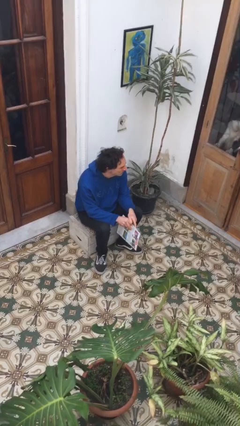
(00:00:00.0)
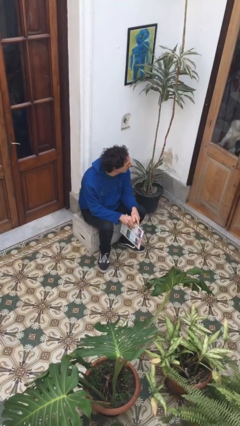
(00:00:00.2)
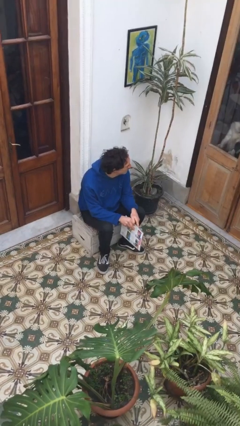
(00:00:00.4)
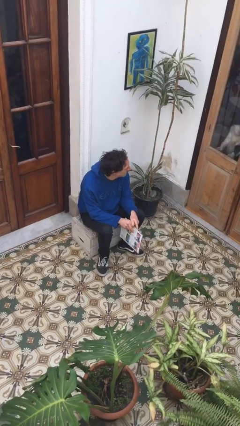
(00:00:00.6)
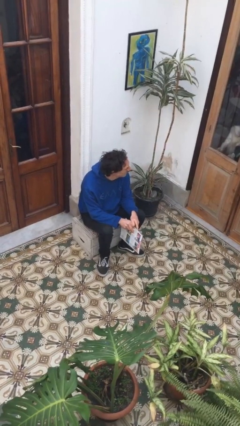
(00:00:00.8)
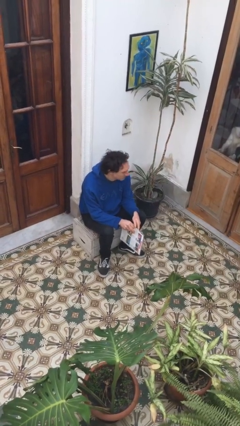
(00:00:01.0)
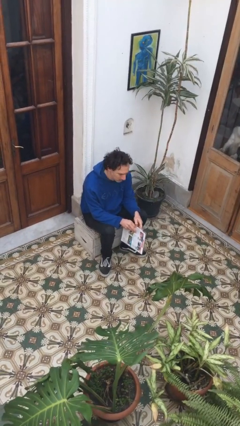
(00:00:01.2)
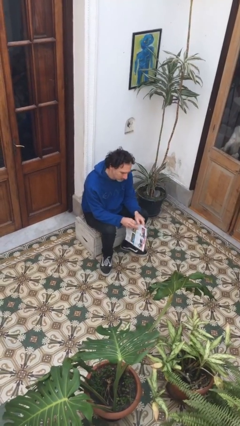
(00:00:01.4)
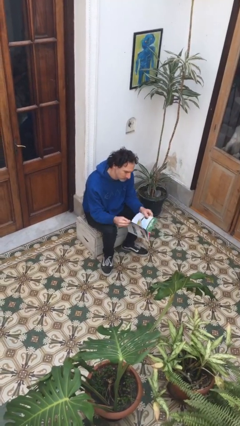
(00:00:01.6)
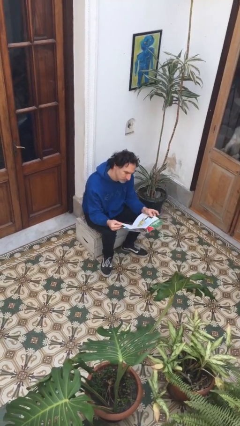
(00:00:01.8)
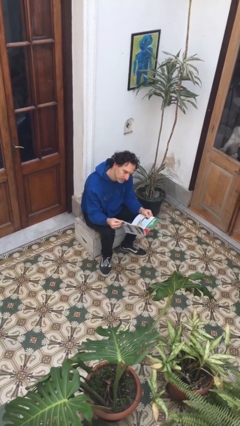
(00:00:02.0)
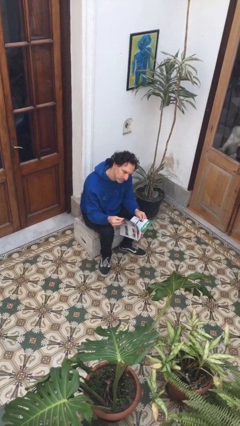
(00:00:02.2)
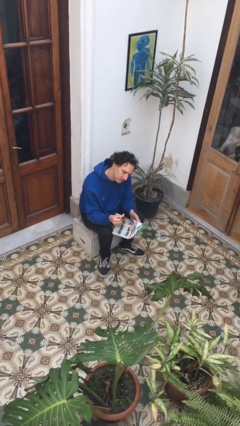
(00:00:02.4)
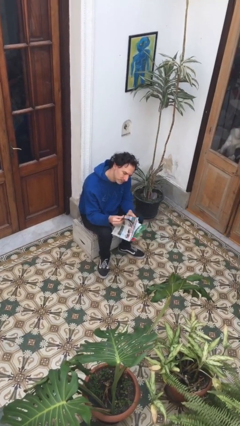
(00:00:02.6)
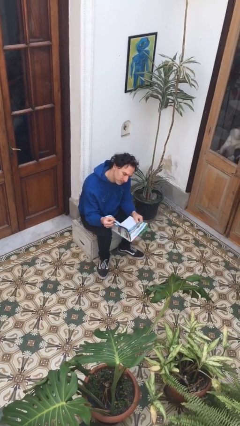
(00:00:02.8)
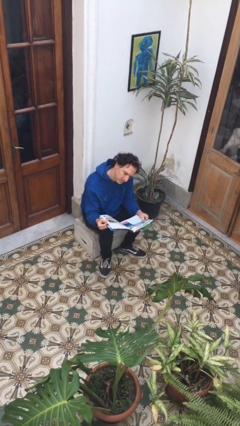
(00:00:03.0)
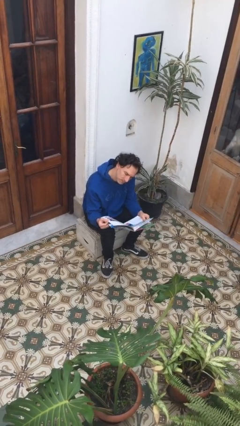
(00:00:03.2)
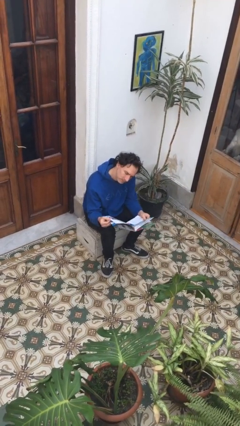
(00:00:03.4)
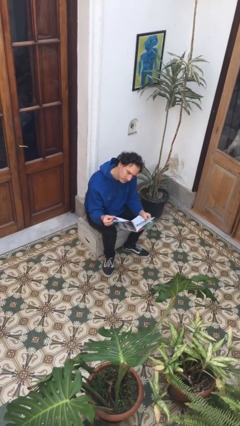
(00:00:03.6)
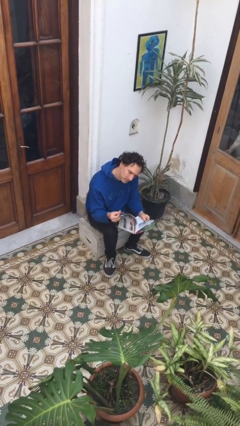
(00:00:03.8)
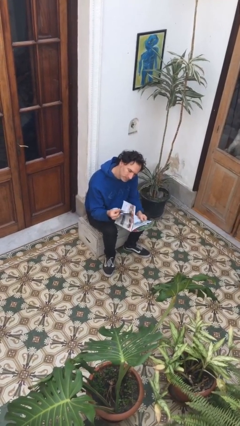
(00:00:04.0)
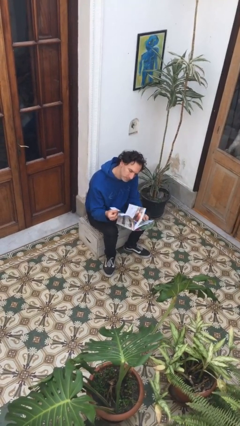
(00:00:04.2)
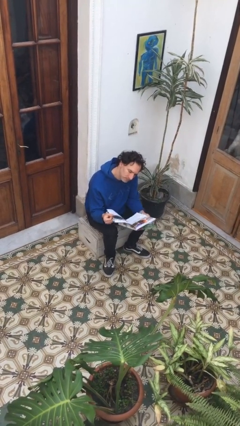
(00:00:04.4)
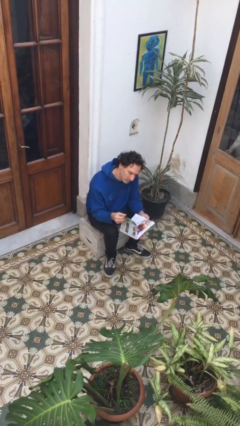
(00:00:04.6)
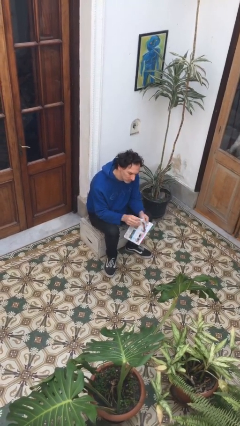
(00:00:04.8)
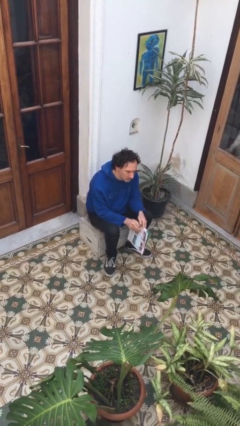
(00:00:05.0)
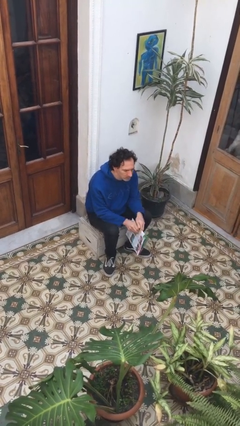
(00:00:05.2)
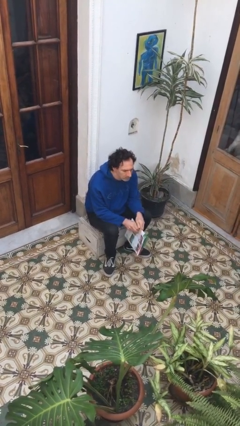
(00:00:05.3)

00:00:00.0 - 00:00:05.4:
person reads magazine

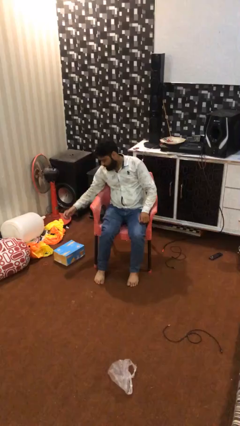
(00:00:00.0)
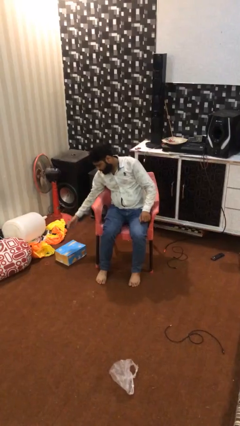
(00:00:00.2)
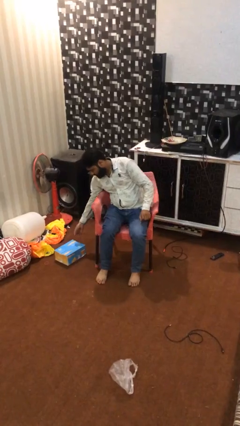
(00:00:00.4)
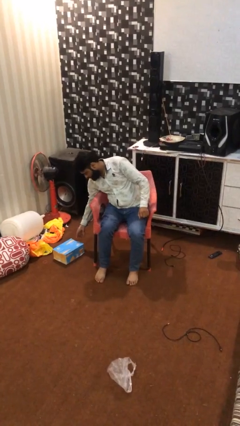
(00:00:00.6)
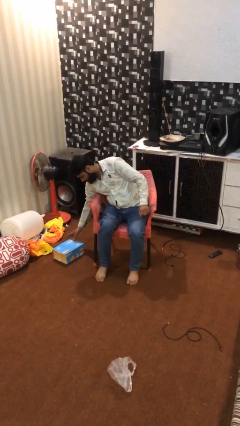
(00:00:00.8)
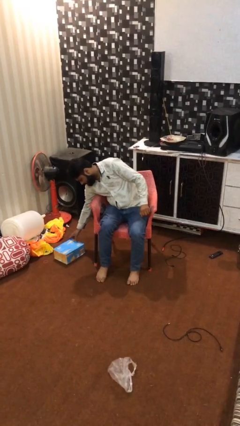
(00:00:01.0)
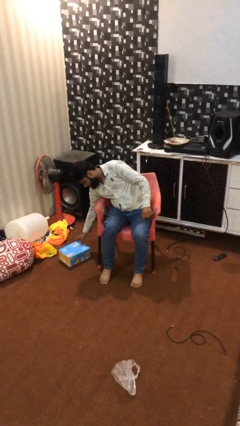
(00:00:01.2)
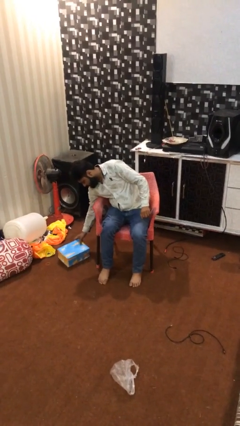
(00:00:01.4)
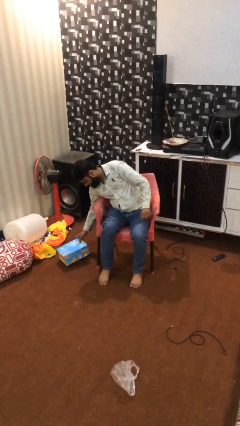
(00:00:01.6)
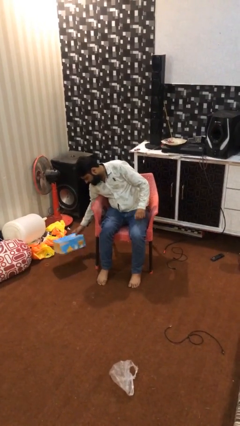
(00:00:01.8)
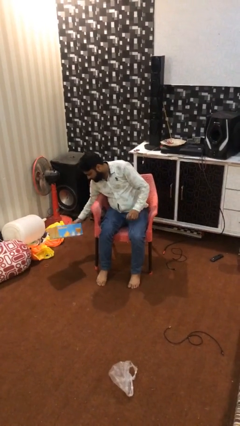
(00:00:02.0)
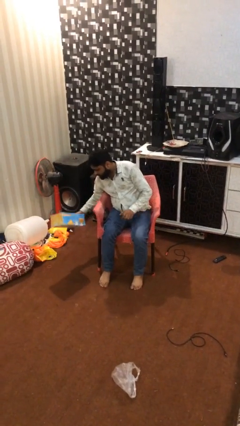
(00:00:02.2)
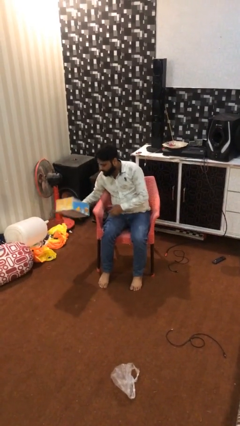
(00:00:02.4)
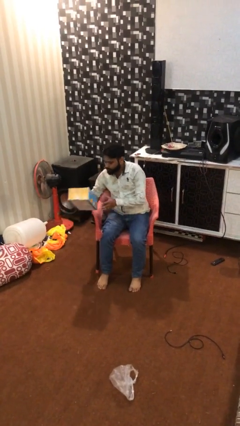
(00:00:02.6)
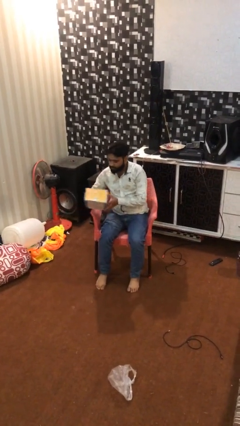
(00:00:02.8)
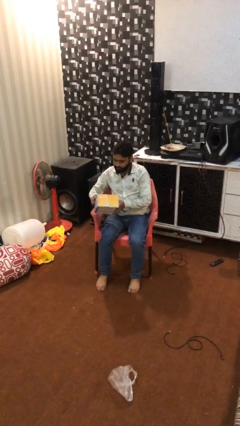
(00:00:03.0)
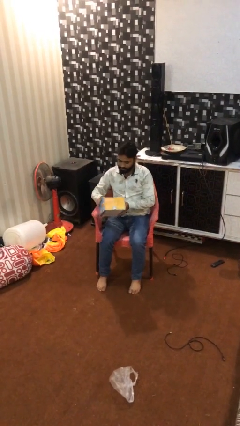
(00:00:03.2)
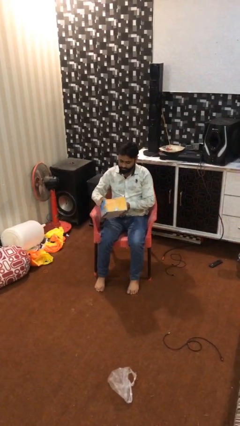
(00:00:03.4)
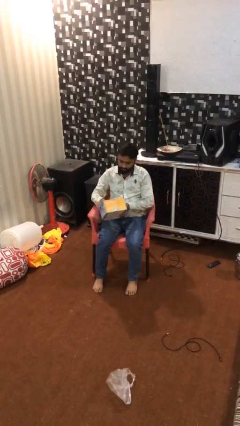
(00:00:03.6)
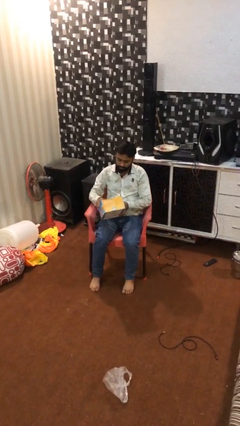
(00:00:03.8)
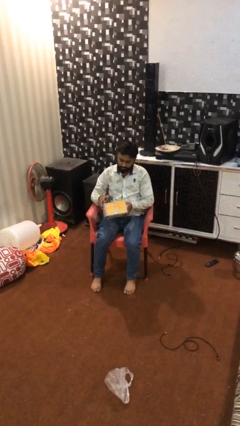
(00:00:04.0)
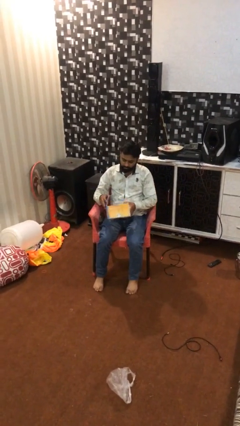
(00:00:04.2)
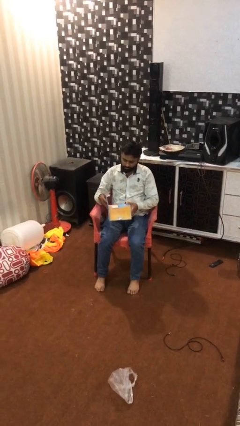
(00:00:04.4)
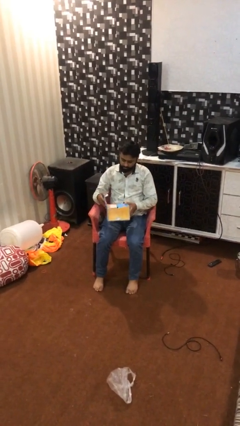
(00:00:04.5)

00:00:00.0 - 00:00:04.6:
person picks up object from floor

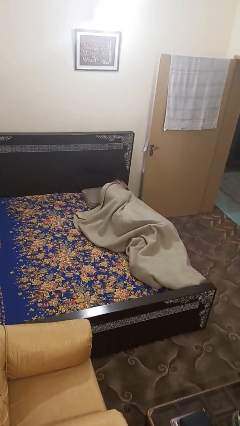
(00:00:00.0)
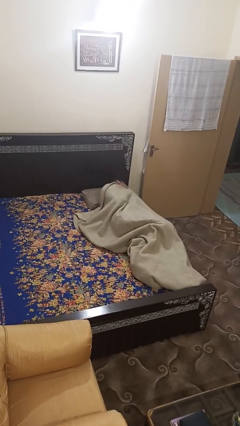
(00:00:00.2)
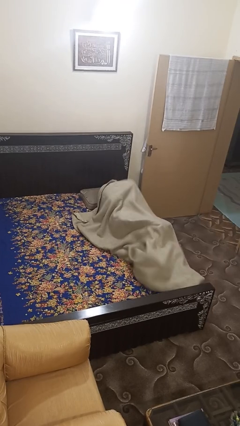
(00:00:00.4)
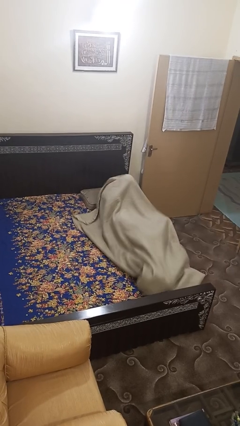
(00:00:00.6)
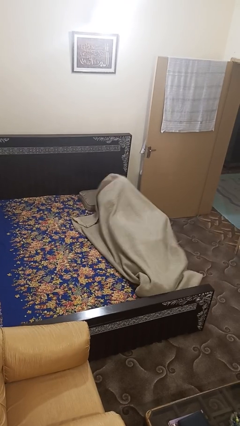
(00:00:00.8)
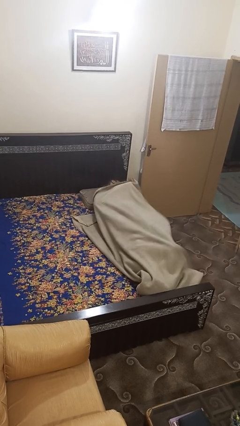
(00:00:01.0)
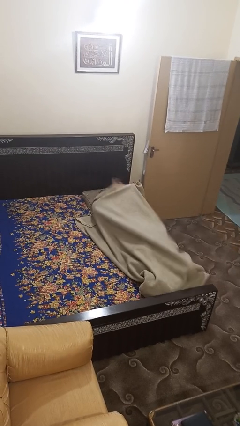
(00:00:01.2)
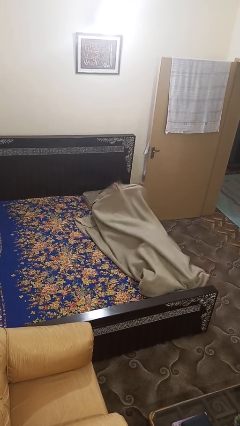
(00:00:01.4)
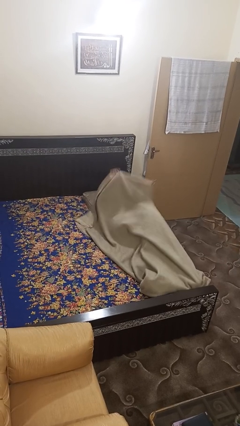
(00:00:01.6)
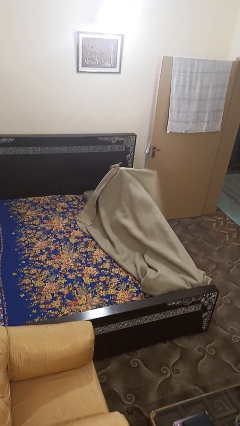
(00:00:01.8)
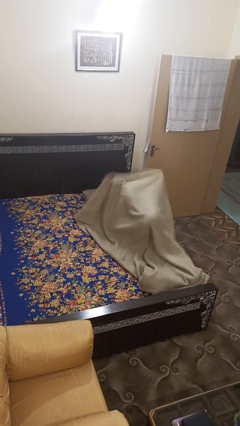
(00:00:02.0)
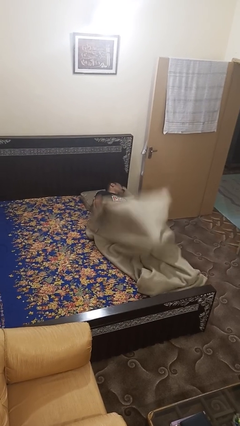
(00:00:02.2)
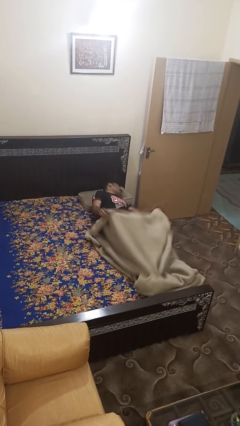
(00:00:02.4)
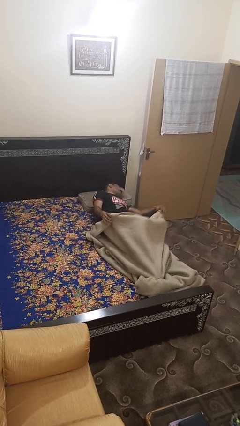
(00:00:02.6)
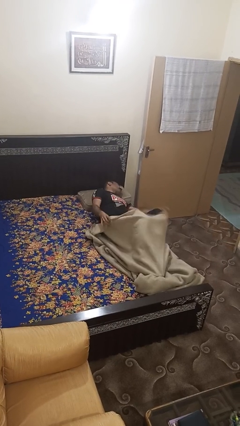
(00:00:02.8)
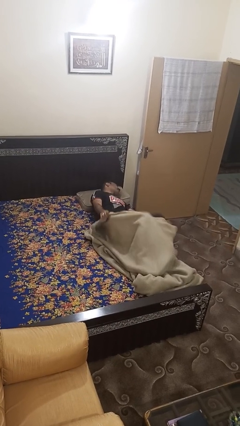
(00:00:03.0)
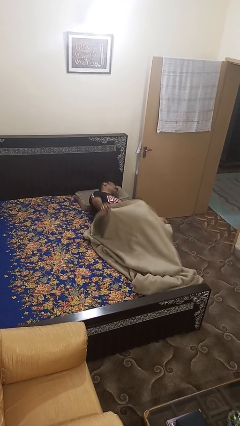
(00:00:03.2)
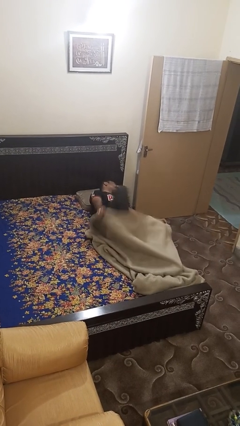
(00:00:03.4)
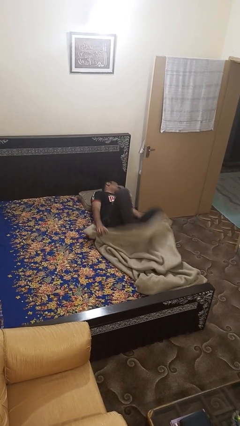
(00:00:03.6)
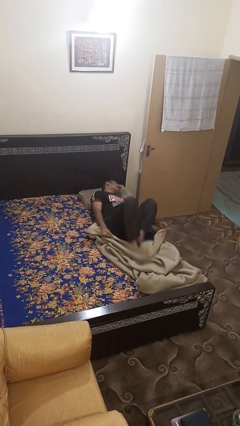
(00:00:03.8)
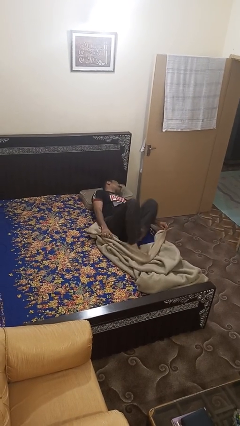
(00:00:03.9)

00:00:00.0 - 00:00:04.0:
person uncovers with bedsheets

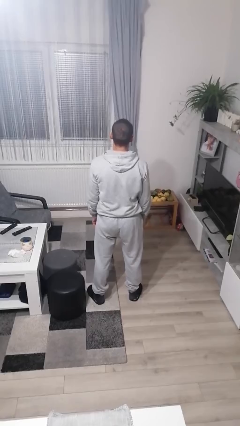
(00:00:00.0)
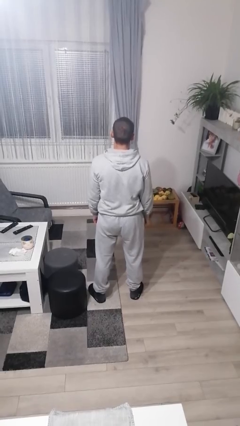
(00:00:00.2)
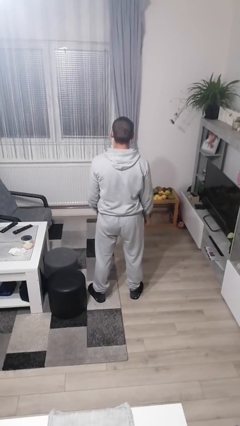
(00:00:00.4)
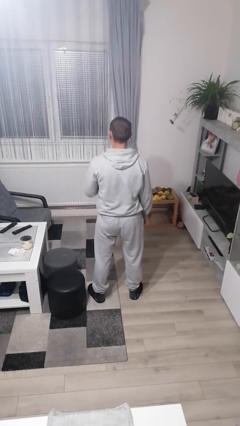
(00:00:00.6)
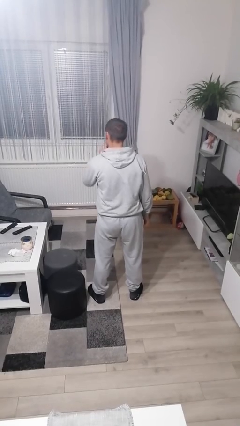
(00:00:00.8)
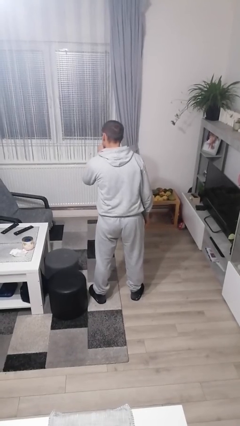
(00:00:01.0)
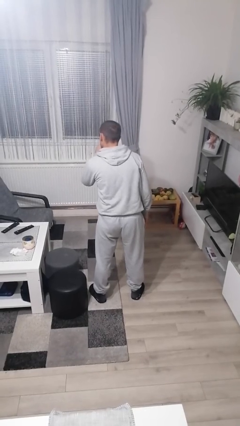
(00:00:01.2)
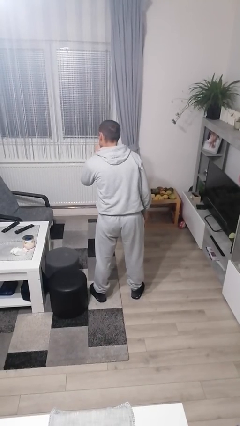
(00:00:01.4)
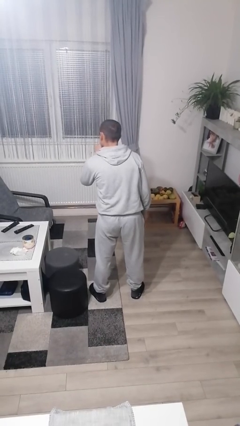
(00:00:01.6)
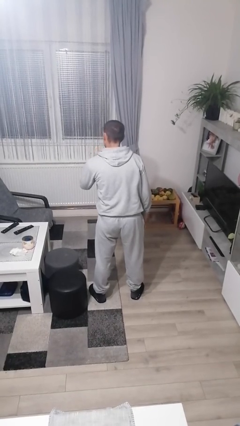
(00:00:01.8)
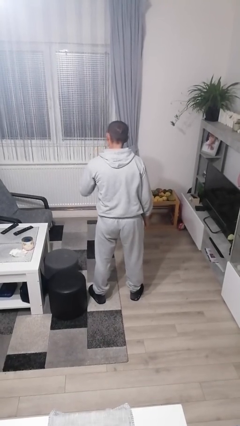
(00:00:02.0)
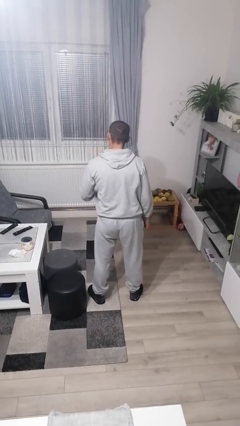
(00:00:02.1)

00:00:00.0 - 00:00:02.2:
person gestures be quiet

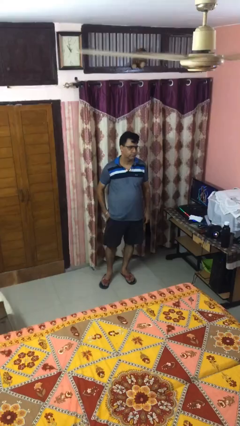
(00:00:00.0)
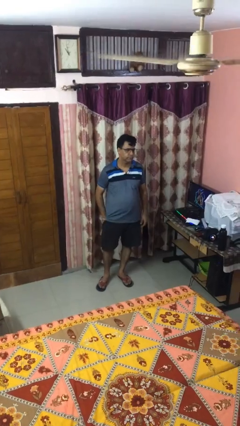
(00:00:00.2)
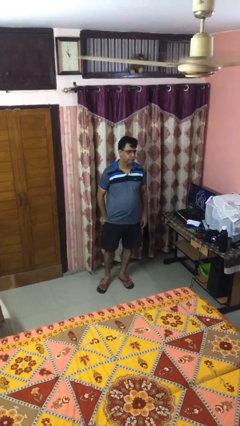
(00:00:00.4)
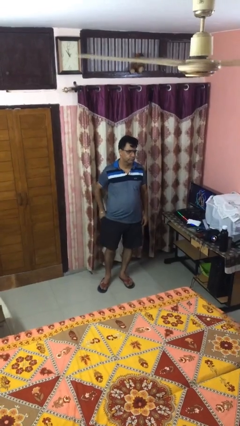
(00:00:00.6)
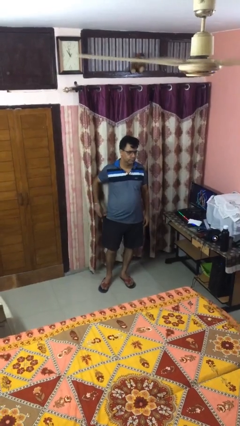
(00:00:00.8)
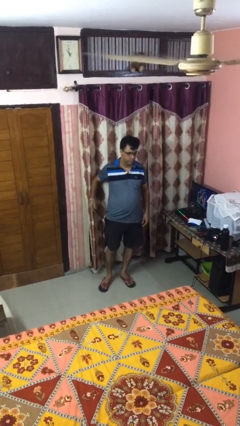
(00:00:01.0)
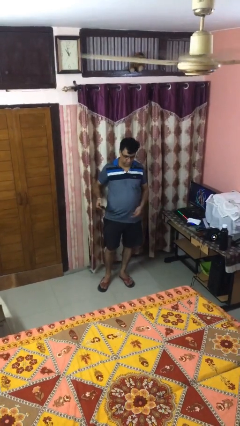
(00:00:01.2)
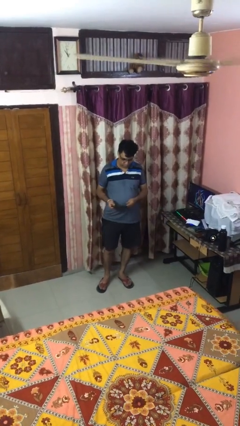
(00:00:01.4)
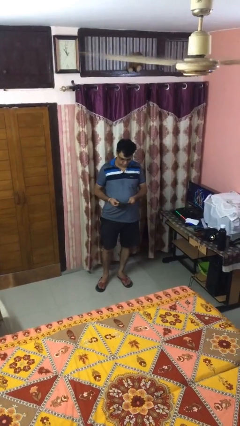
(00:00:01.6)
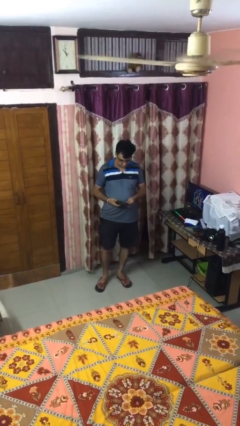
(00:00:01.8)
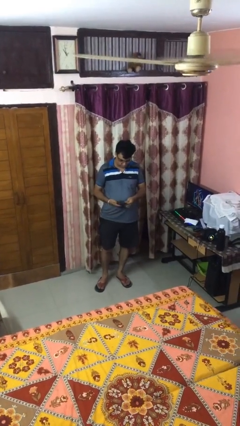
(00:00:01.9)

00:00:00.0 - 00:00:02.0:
person takes phone from pocket
